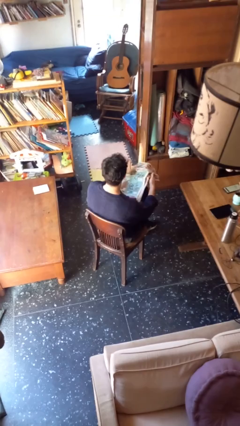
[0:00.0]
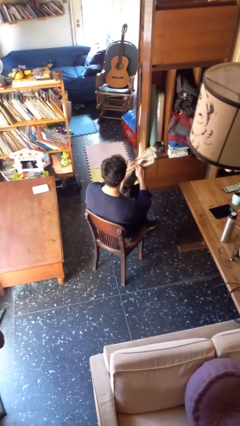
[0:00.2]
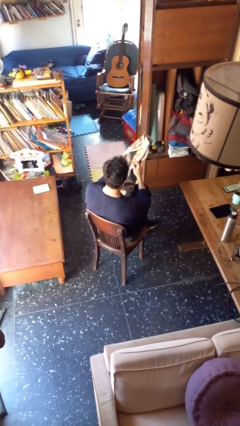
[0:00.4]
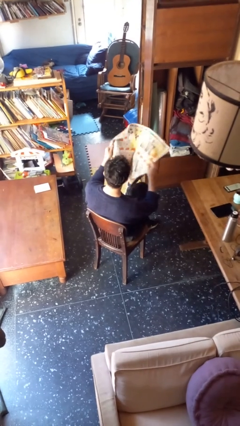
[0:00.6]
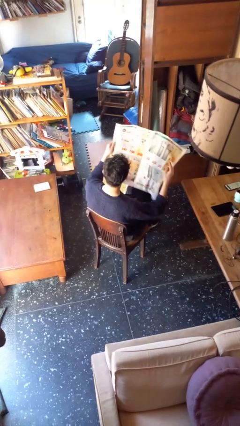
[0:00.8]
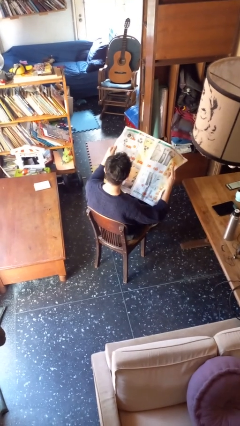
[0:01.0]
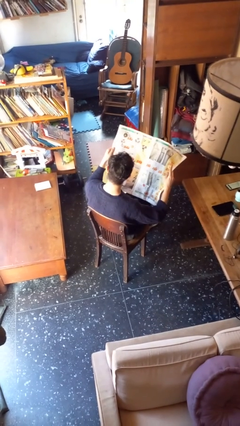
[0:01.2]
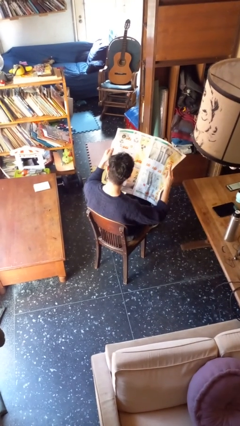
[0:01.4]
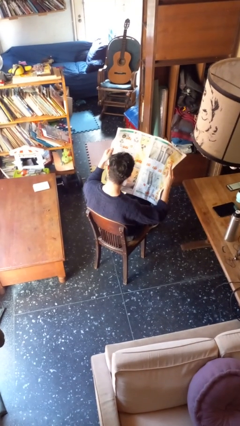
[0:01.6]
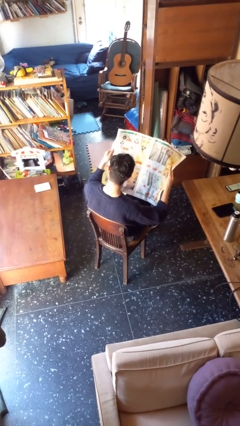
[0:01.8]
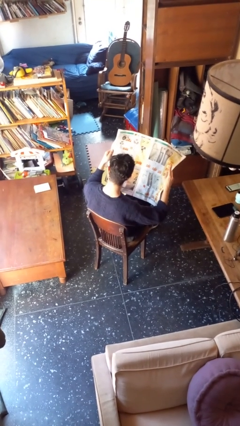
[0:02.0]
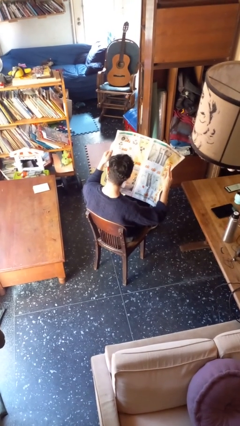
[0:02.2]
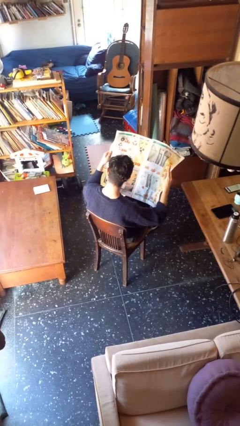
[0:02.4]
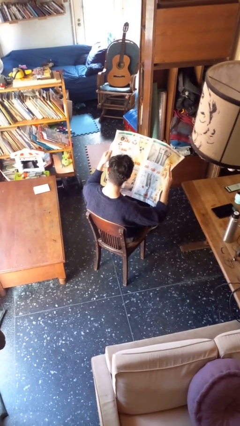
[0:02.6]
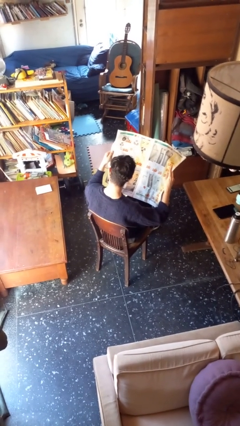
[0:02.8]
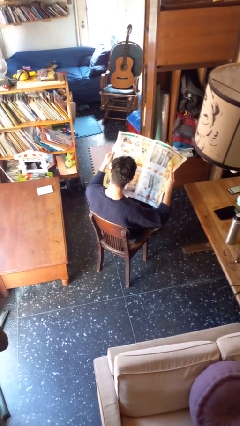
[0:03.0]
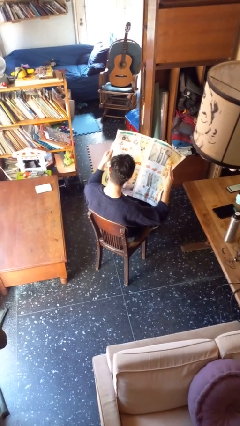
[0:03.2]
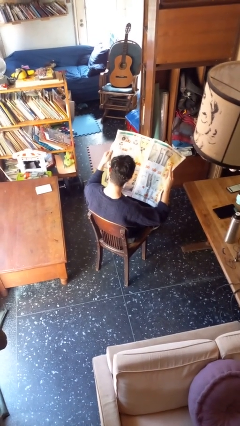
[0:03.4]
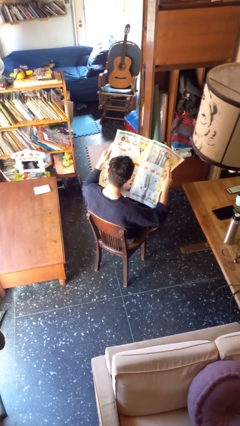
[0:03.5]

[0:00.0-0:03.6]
person reads newspaper

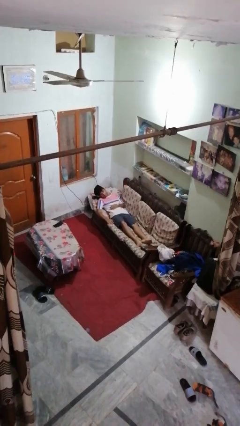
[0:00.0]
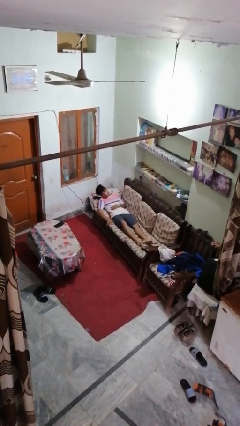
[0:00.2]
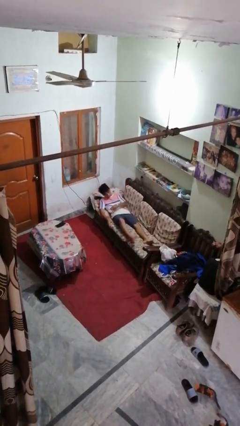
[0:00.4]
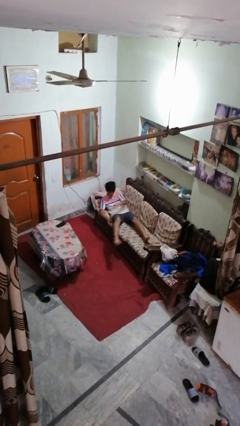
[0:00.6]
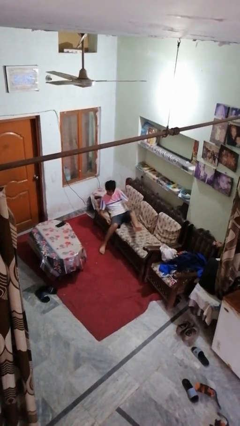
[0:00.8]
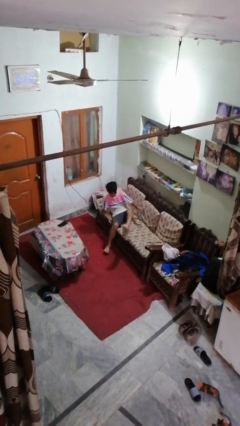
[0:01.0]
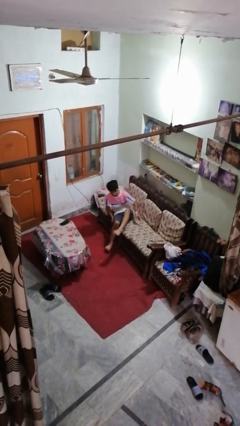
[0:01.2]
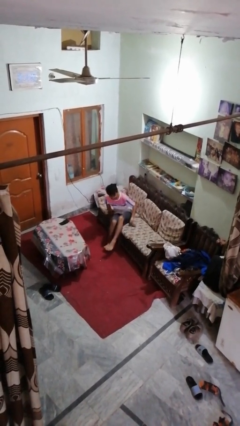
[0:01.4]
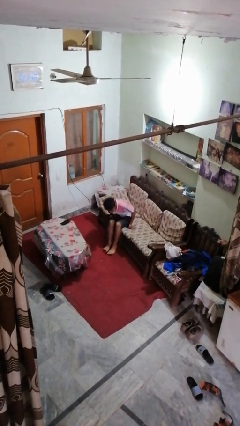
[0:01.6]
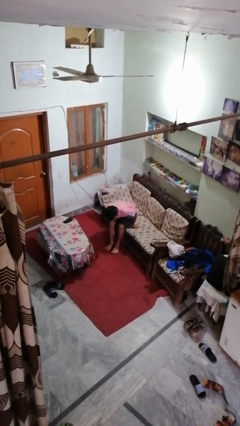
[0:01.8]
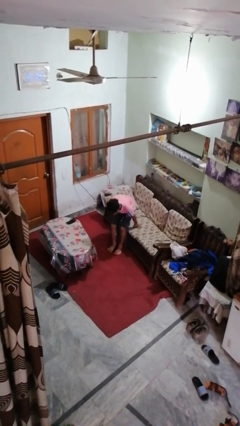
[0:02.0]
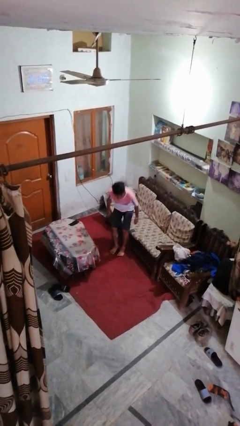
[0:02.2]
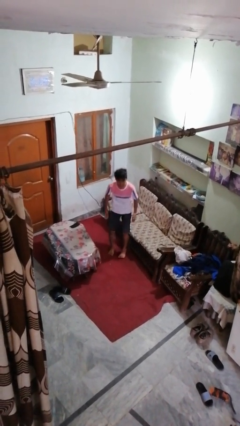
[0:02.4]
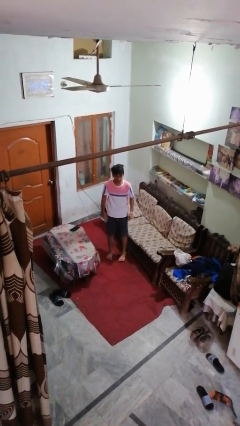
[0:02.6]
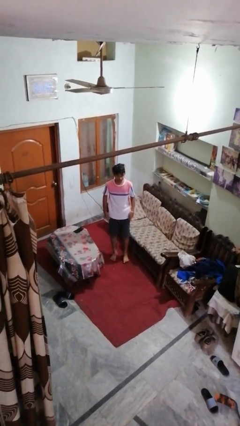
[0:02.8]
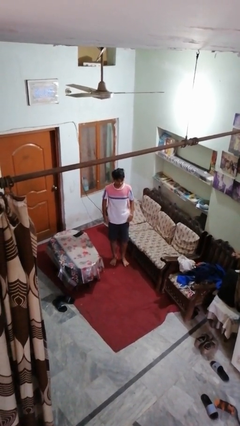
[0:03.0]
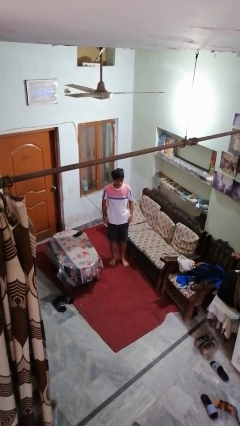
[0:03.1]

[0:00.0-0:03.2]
person stands up

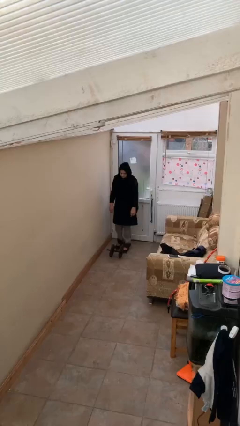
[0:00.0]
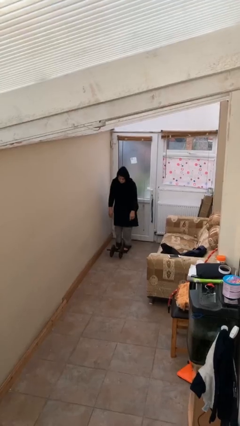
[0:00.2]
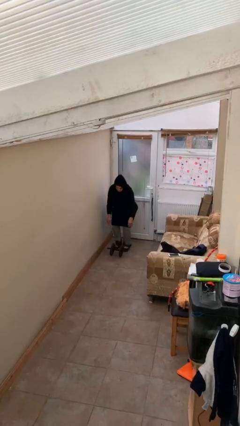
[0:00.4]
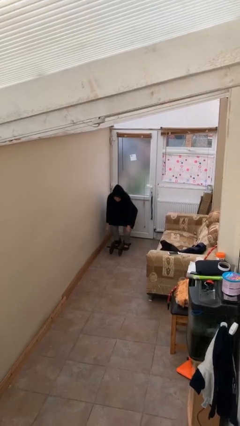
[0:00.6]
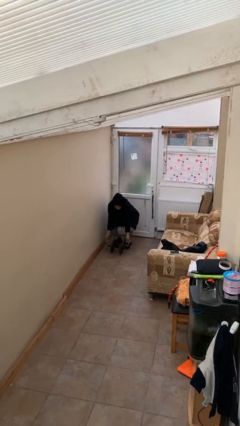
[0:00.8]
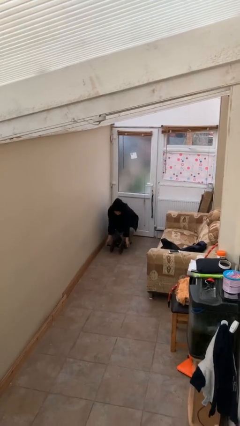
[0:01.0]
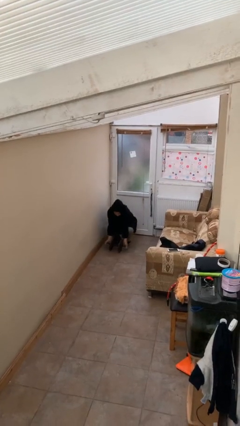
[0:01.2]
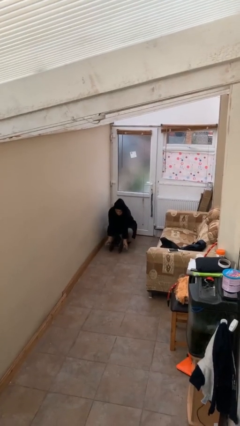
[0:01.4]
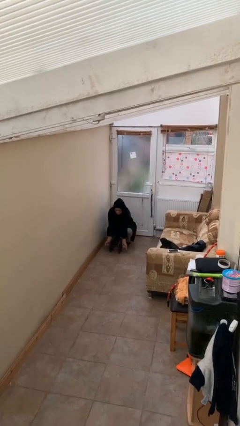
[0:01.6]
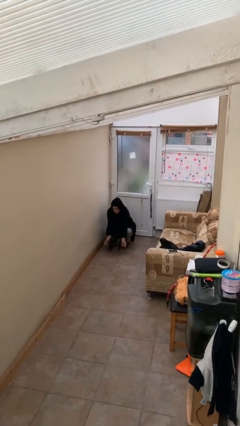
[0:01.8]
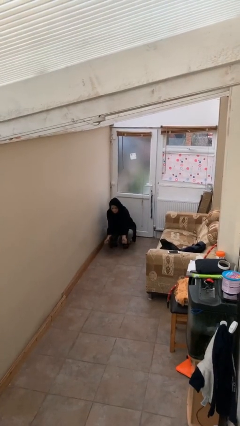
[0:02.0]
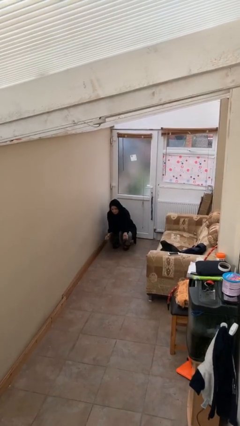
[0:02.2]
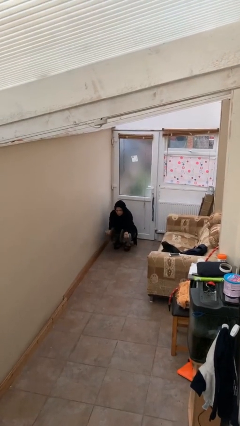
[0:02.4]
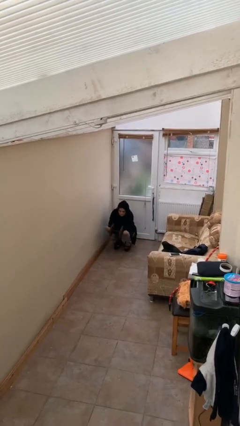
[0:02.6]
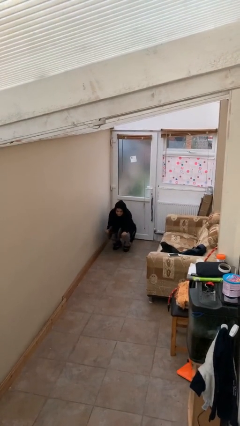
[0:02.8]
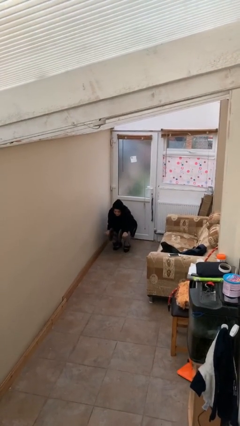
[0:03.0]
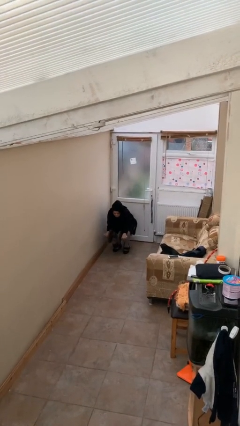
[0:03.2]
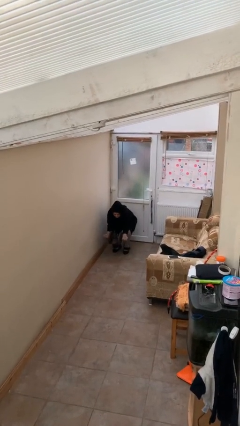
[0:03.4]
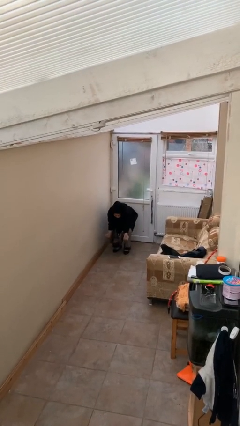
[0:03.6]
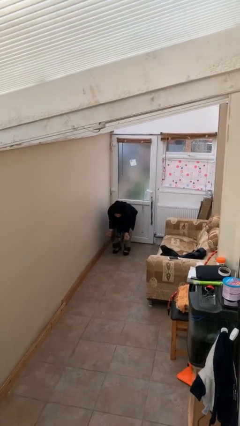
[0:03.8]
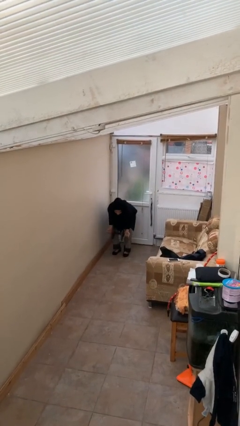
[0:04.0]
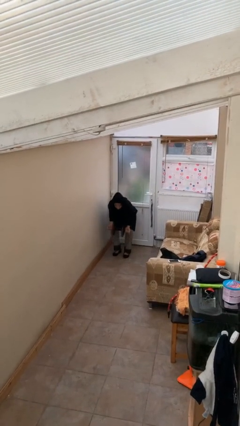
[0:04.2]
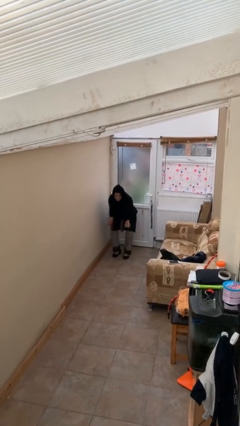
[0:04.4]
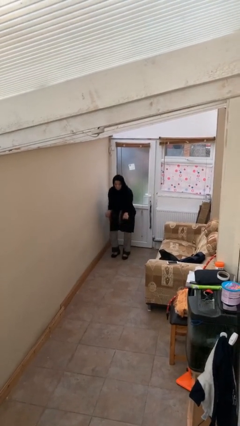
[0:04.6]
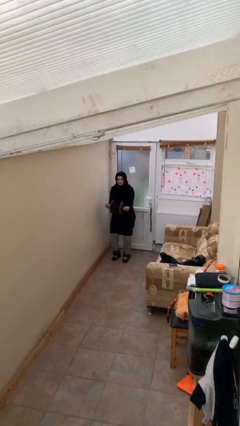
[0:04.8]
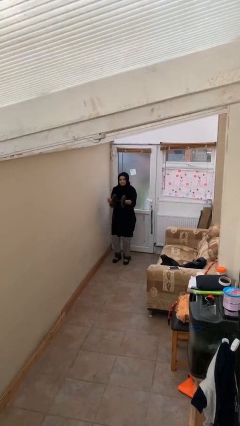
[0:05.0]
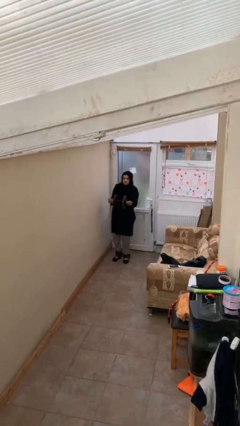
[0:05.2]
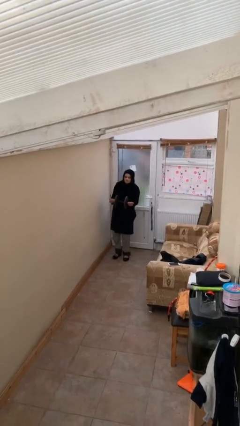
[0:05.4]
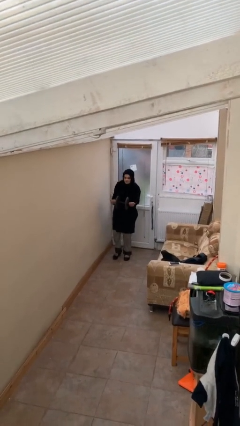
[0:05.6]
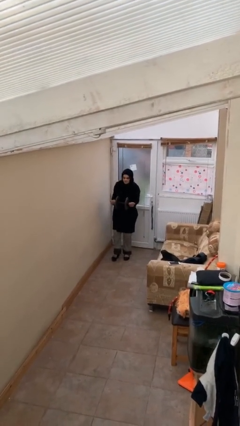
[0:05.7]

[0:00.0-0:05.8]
person picks up object from floor

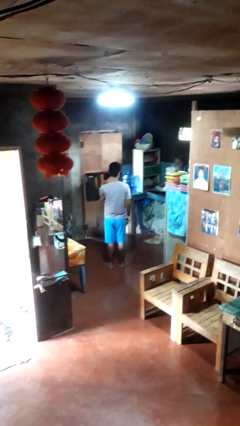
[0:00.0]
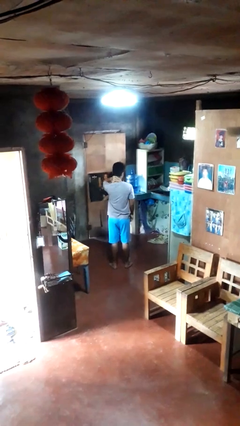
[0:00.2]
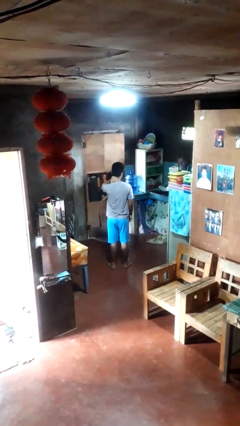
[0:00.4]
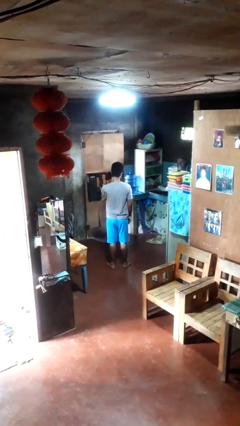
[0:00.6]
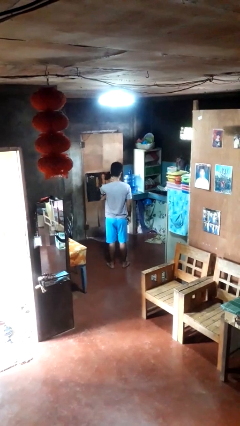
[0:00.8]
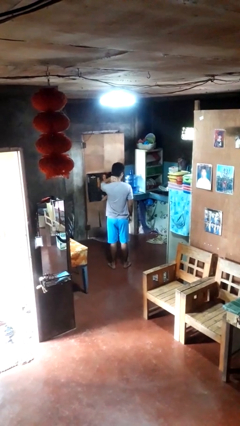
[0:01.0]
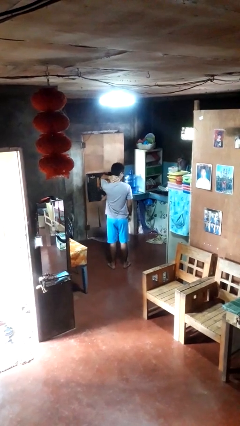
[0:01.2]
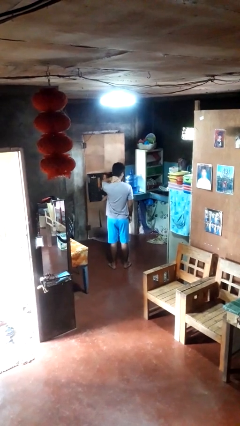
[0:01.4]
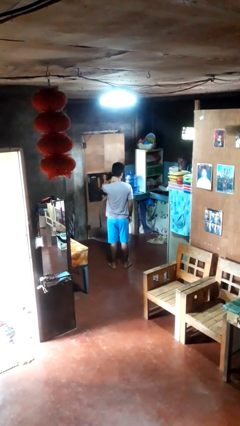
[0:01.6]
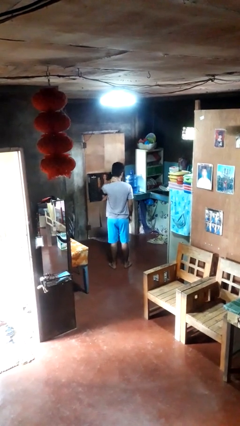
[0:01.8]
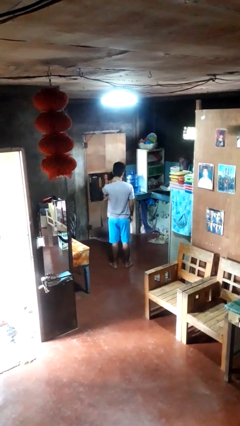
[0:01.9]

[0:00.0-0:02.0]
person rubs neck

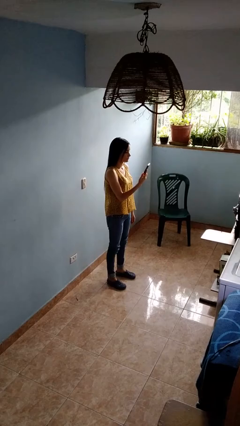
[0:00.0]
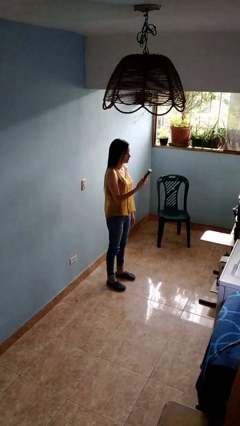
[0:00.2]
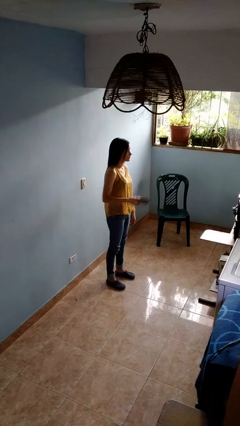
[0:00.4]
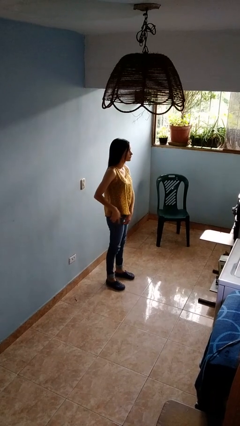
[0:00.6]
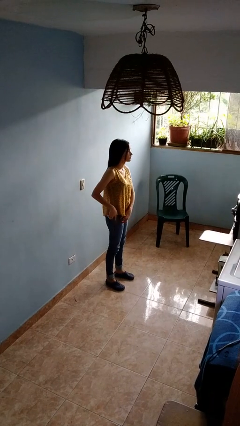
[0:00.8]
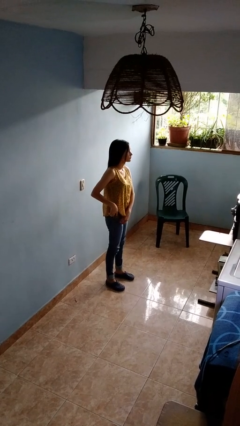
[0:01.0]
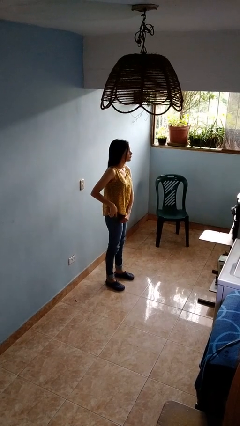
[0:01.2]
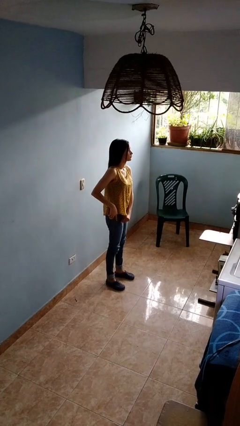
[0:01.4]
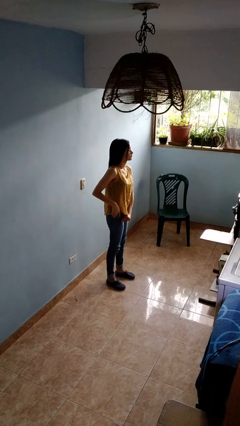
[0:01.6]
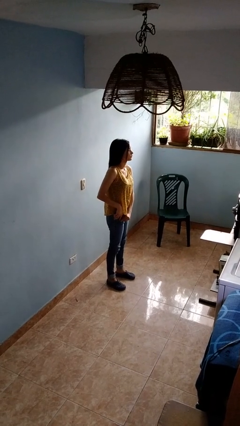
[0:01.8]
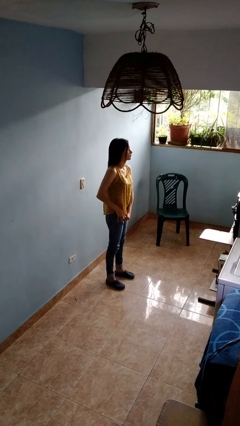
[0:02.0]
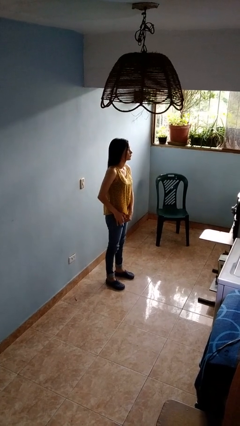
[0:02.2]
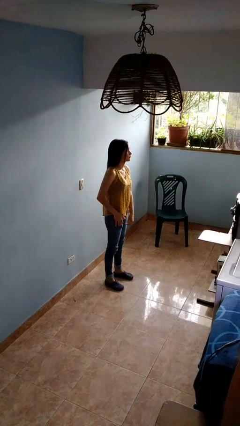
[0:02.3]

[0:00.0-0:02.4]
person puts phone into pocket

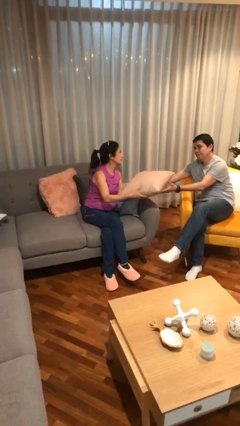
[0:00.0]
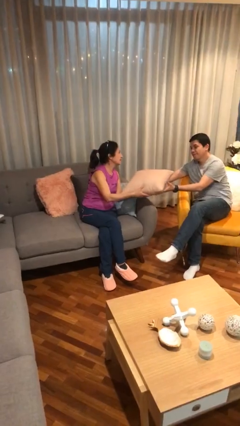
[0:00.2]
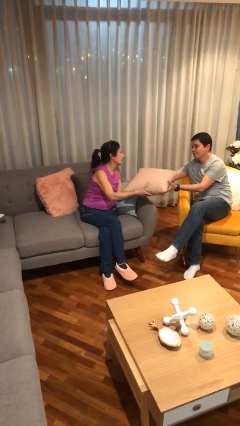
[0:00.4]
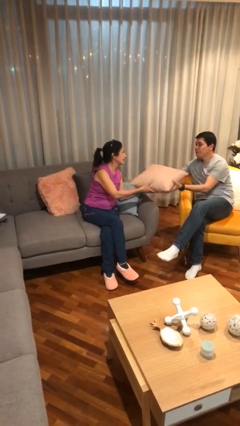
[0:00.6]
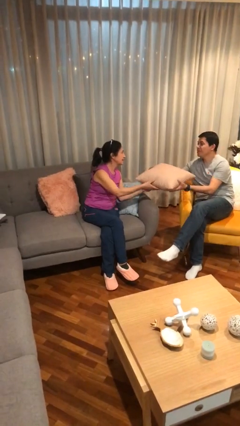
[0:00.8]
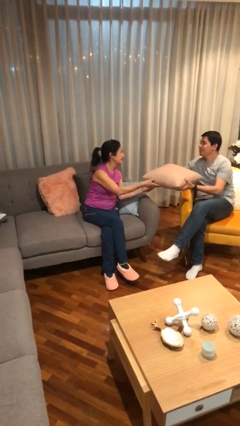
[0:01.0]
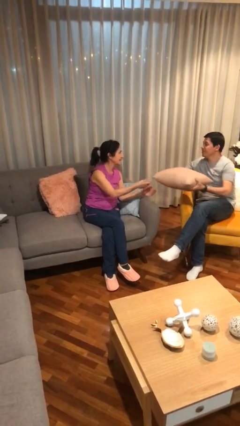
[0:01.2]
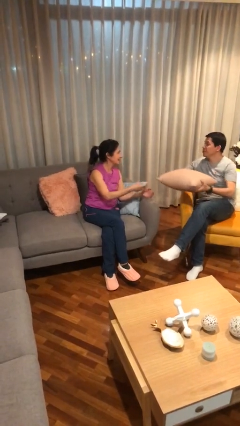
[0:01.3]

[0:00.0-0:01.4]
person transfers object to person
